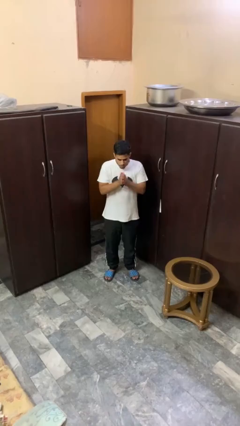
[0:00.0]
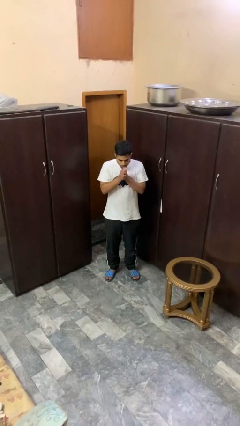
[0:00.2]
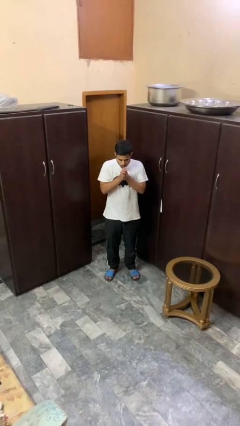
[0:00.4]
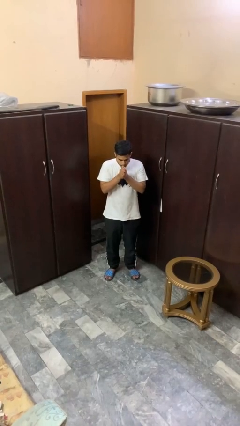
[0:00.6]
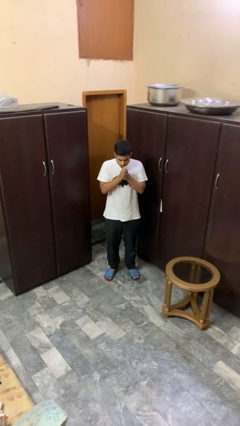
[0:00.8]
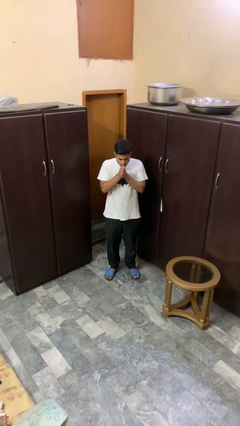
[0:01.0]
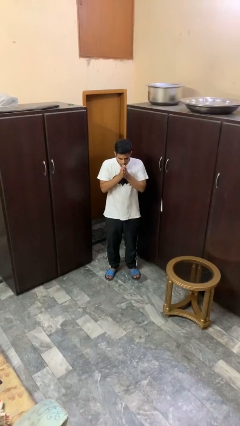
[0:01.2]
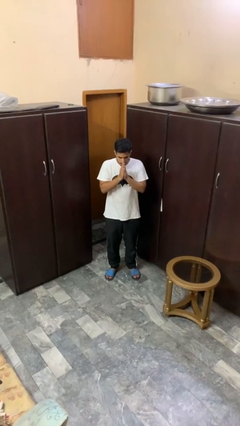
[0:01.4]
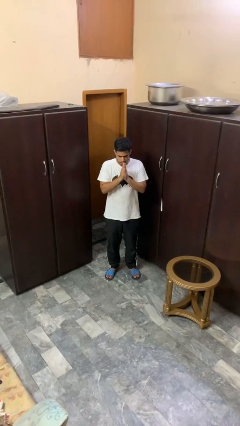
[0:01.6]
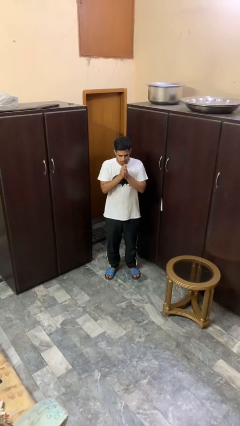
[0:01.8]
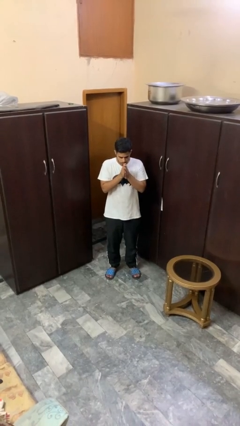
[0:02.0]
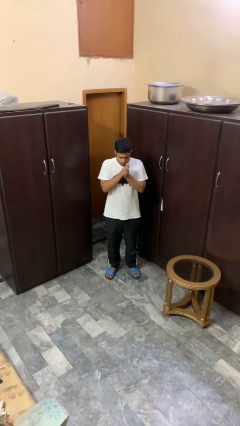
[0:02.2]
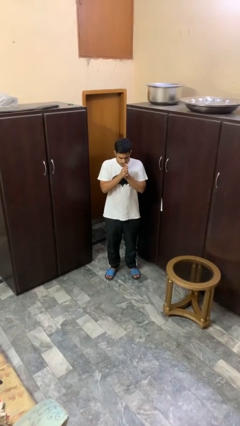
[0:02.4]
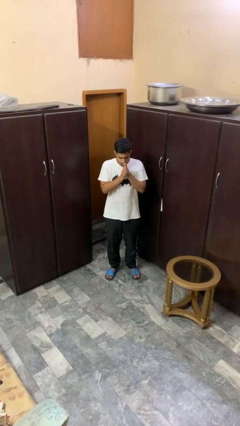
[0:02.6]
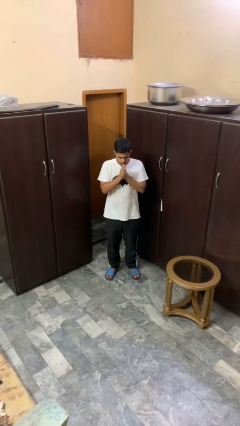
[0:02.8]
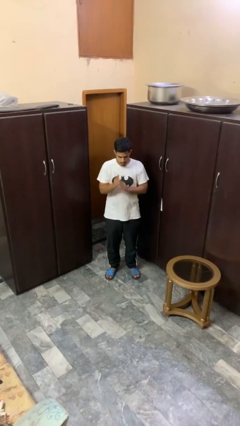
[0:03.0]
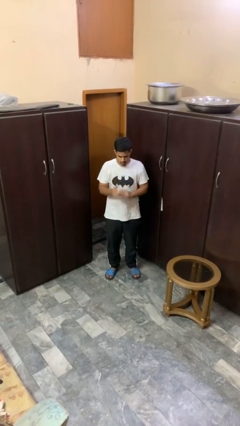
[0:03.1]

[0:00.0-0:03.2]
person blows into hands

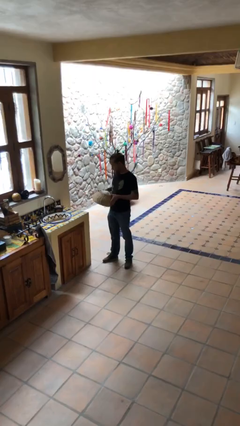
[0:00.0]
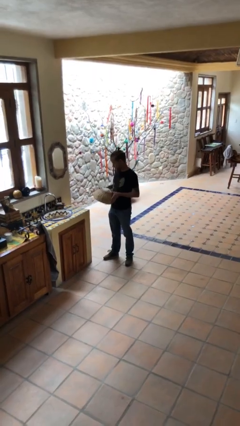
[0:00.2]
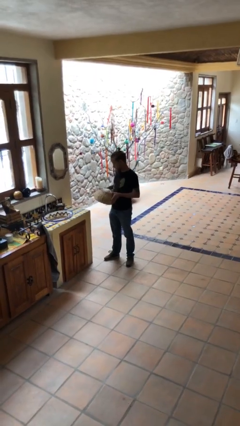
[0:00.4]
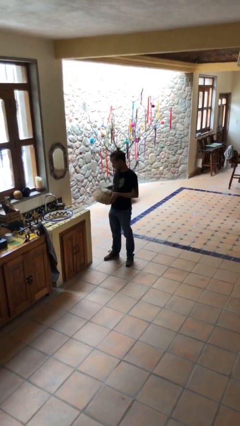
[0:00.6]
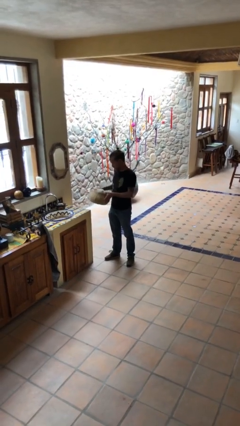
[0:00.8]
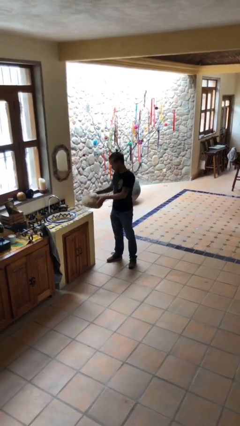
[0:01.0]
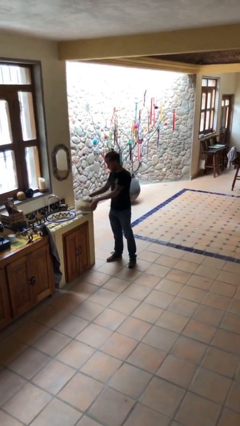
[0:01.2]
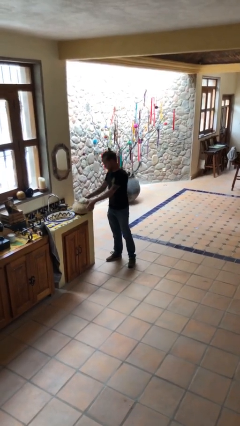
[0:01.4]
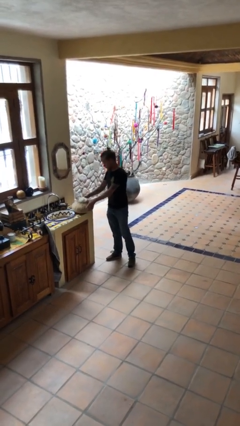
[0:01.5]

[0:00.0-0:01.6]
person puts down object on table

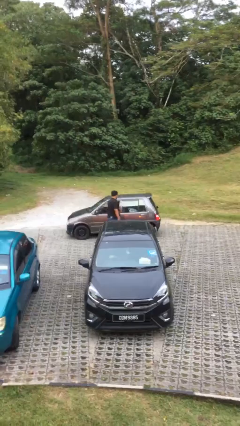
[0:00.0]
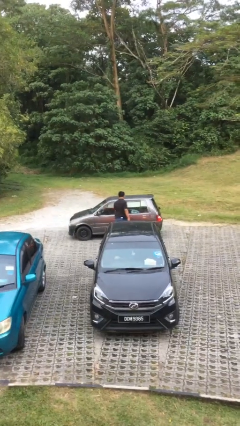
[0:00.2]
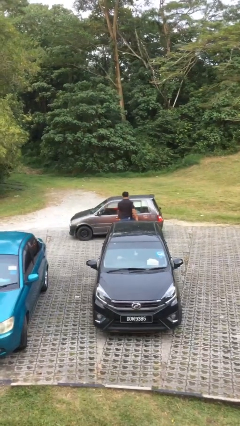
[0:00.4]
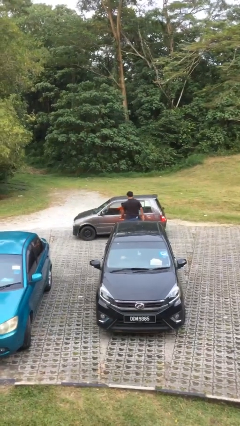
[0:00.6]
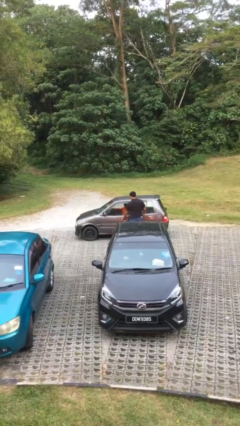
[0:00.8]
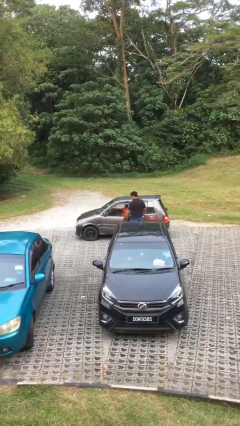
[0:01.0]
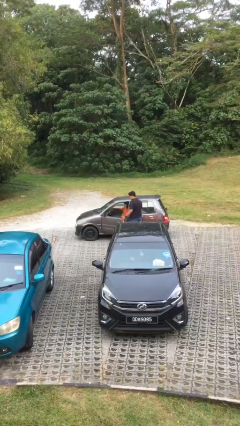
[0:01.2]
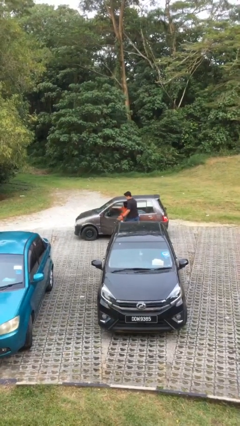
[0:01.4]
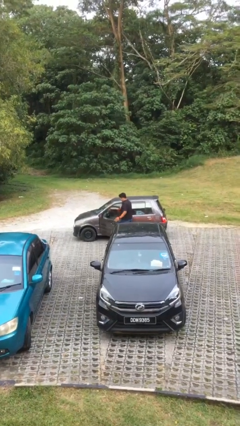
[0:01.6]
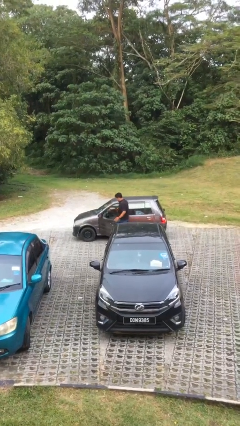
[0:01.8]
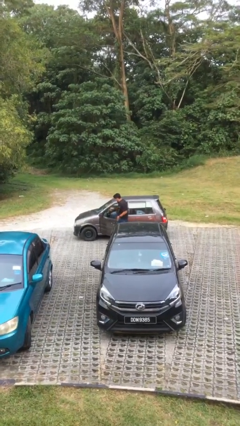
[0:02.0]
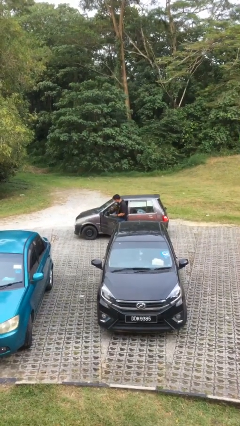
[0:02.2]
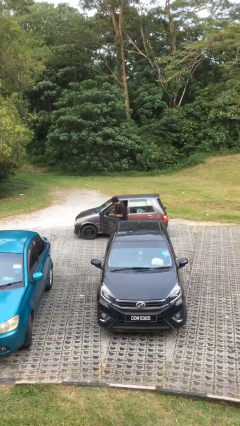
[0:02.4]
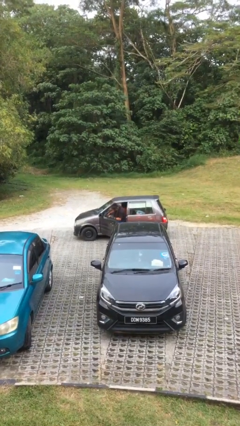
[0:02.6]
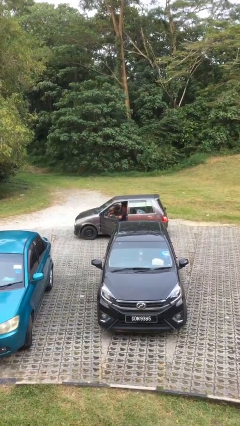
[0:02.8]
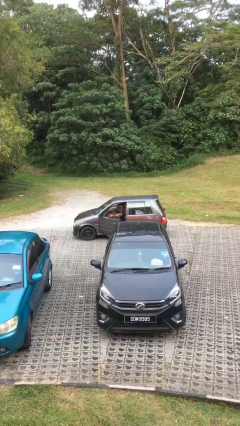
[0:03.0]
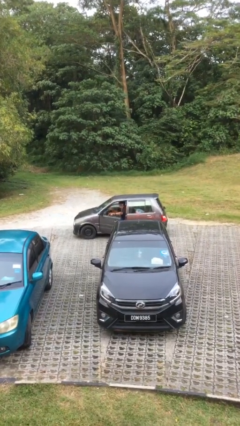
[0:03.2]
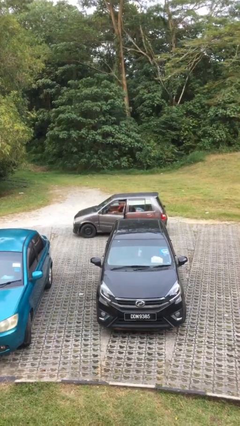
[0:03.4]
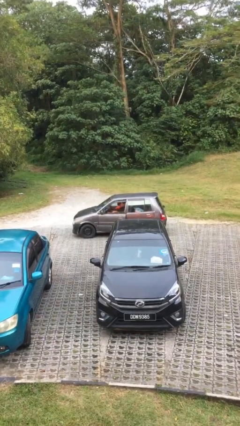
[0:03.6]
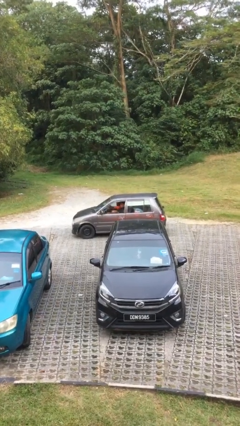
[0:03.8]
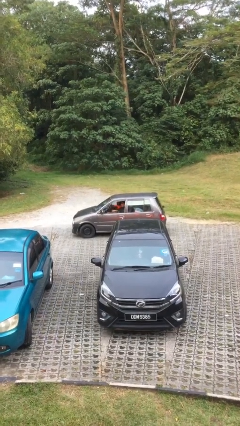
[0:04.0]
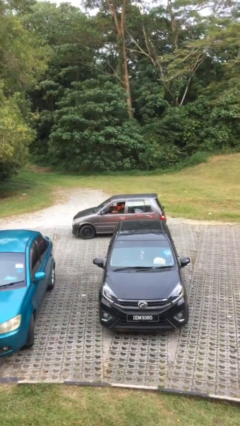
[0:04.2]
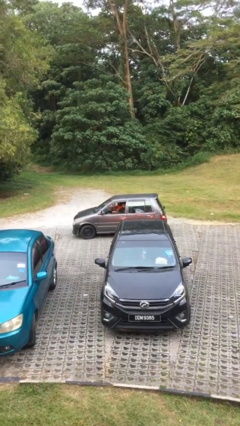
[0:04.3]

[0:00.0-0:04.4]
car picks up person

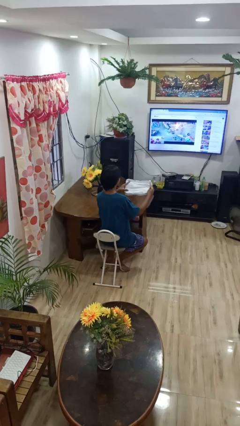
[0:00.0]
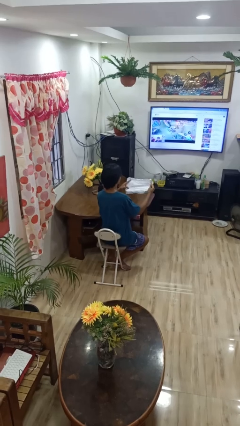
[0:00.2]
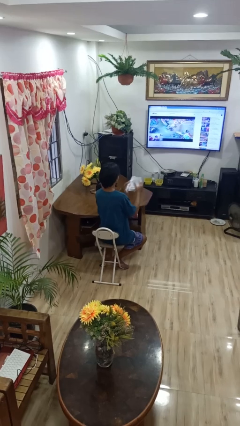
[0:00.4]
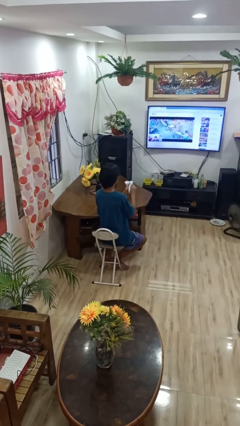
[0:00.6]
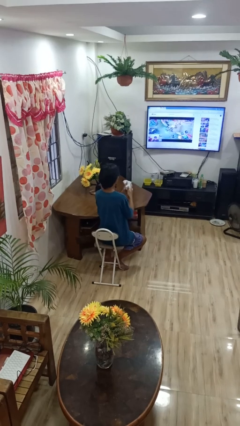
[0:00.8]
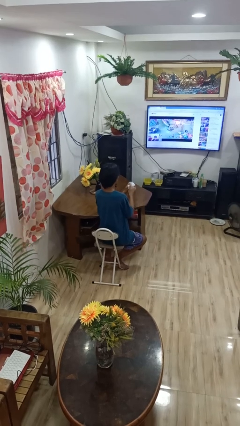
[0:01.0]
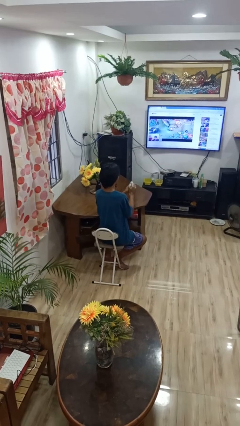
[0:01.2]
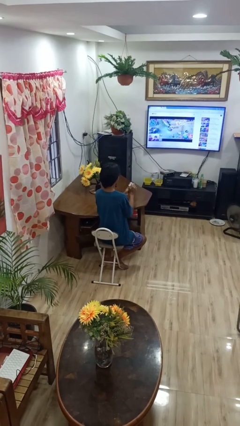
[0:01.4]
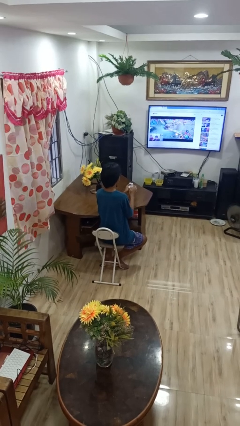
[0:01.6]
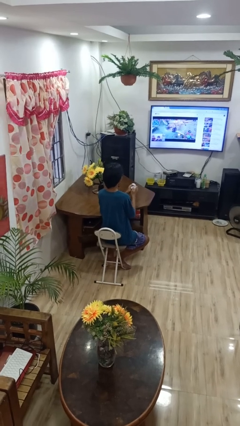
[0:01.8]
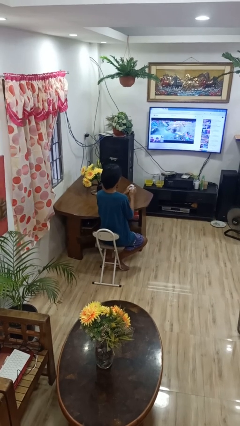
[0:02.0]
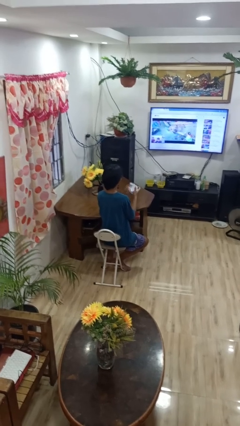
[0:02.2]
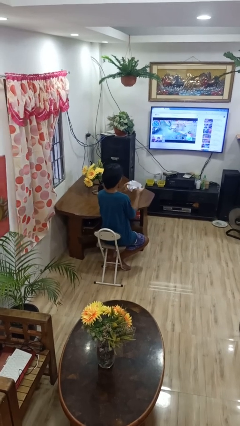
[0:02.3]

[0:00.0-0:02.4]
person crumples paper

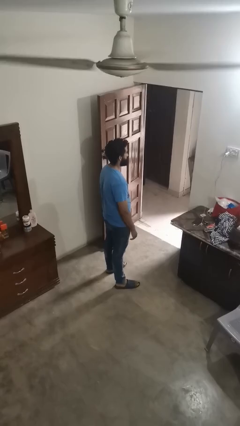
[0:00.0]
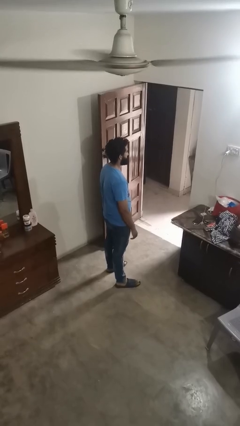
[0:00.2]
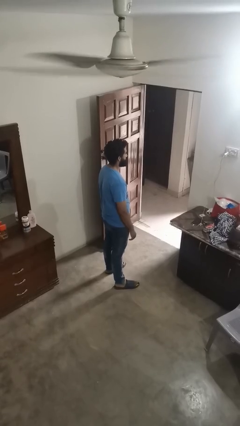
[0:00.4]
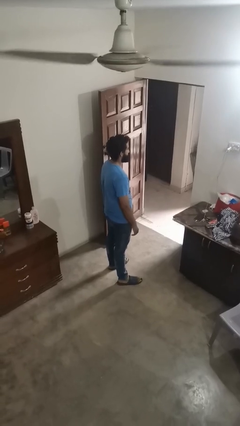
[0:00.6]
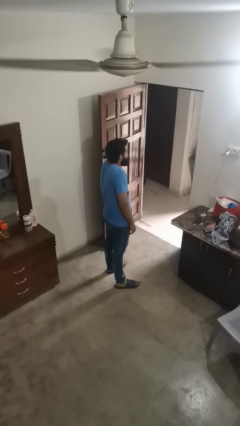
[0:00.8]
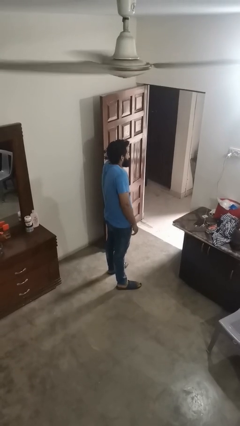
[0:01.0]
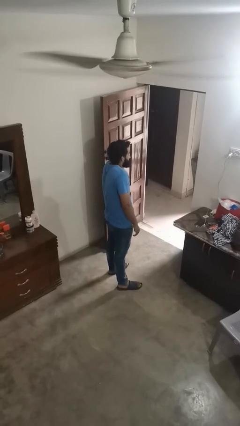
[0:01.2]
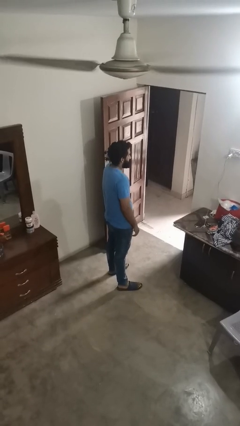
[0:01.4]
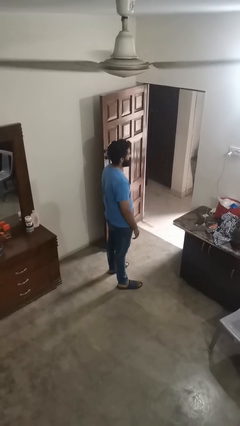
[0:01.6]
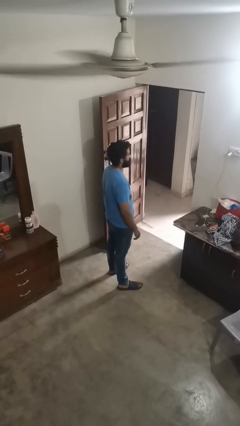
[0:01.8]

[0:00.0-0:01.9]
person shrugs

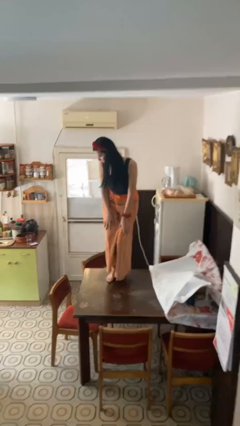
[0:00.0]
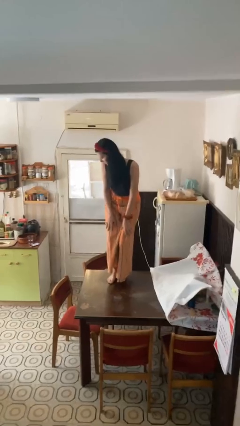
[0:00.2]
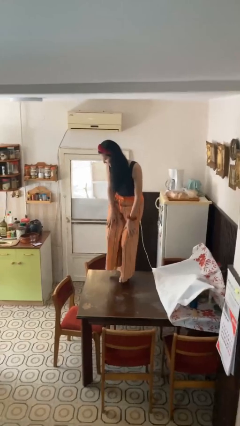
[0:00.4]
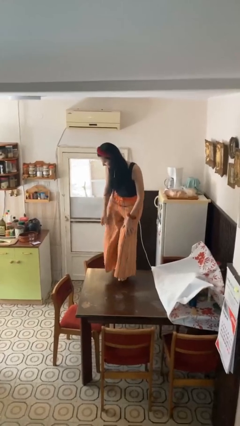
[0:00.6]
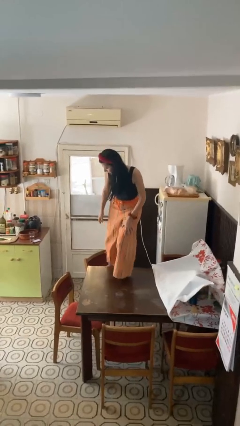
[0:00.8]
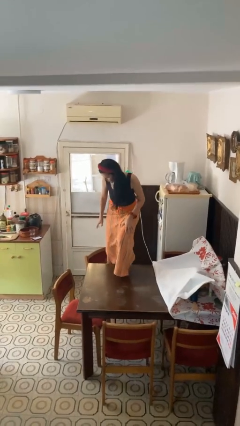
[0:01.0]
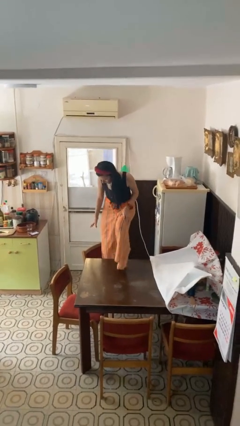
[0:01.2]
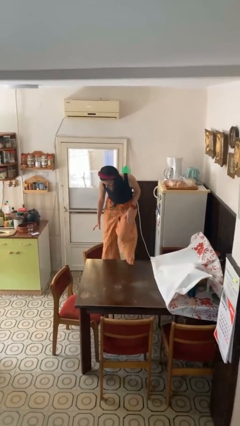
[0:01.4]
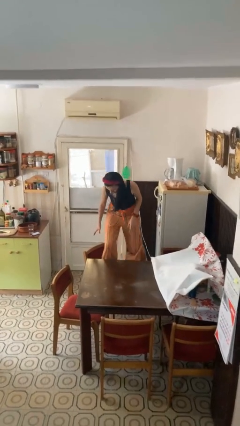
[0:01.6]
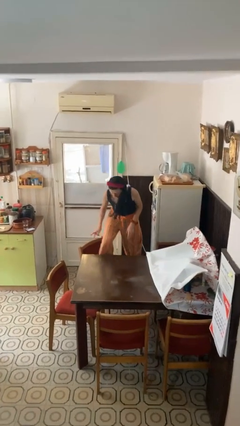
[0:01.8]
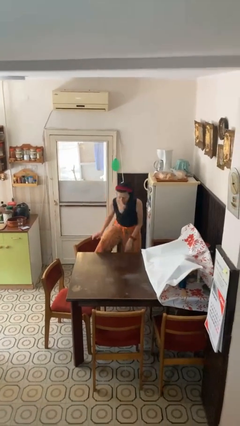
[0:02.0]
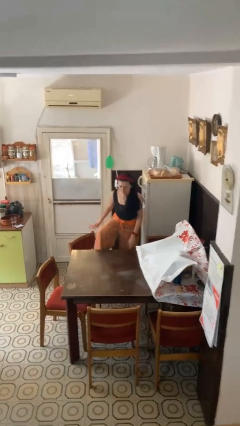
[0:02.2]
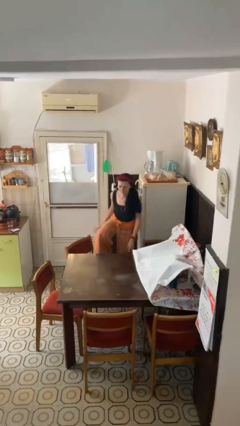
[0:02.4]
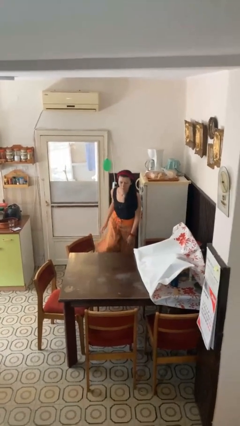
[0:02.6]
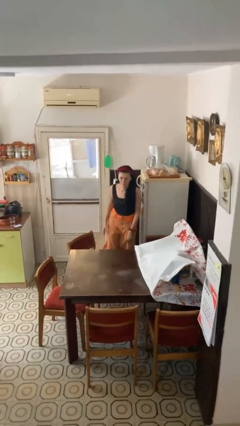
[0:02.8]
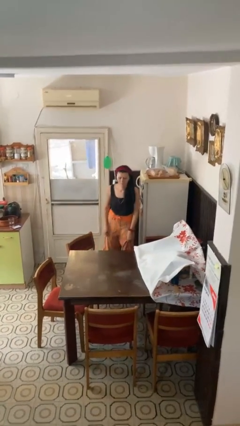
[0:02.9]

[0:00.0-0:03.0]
person climbs off table

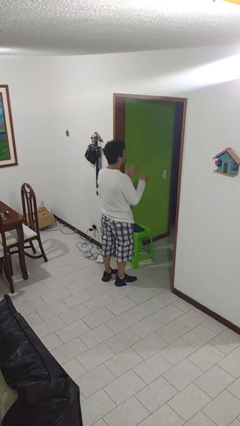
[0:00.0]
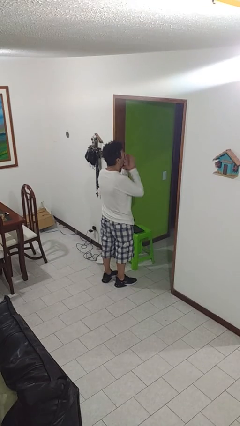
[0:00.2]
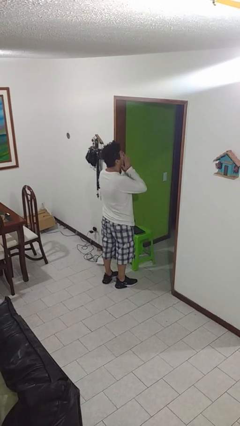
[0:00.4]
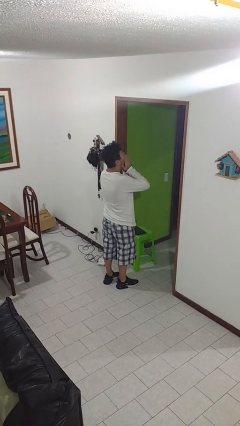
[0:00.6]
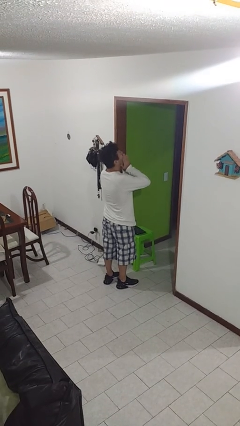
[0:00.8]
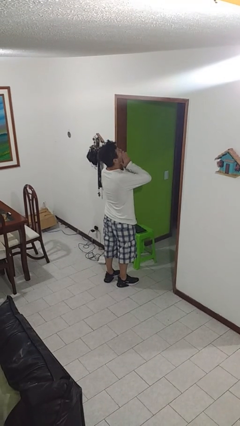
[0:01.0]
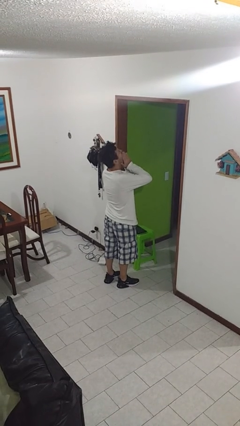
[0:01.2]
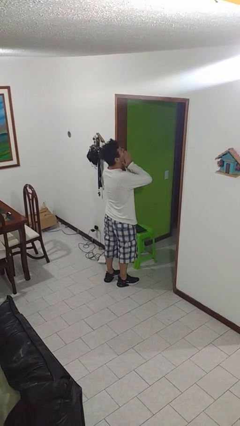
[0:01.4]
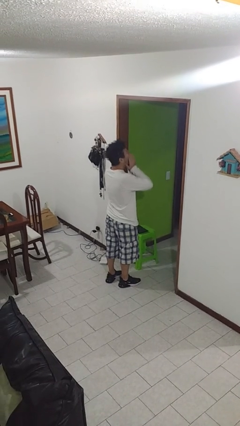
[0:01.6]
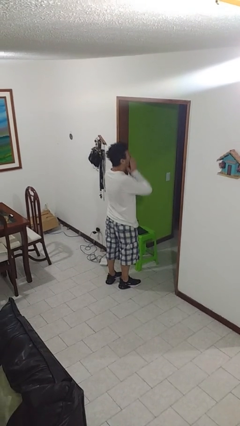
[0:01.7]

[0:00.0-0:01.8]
person yawns
